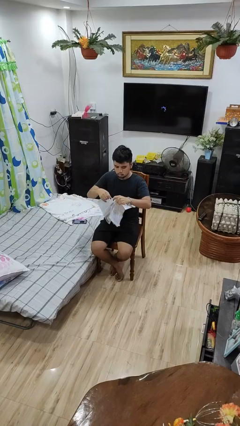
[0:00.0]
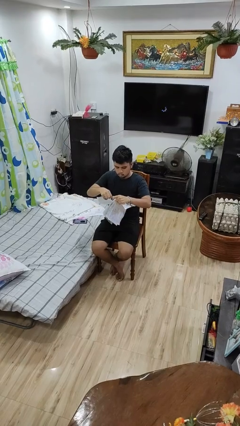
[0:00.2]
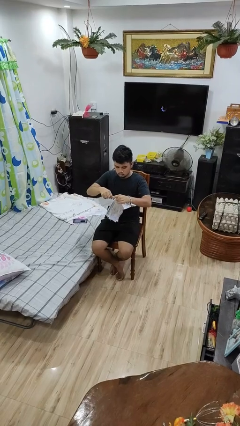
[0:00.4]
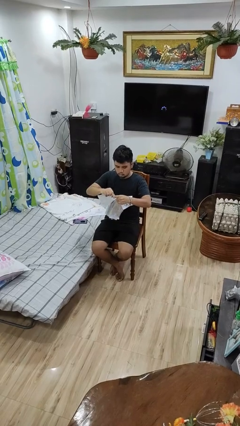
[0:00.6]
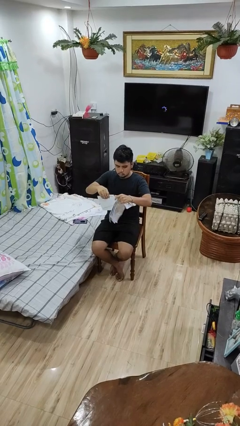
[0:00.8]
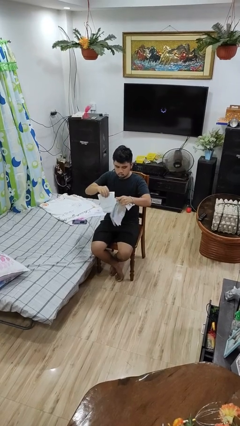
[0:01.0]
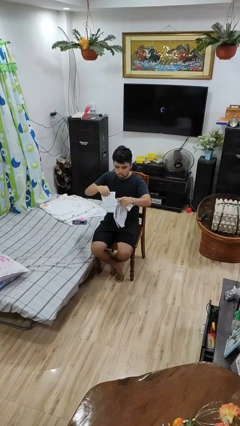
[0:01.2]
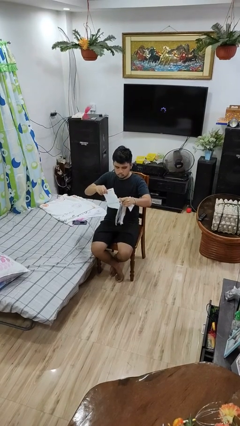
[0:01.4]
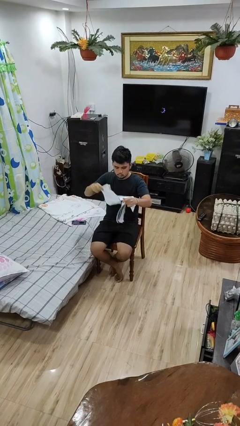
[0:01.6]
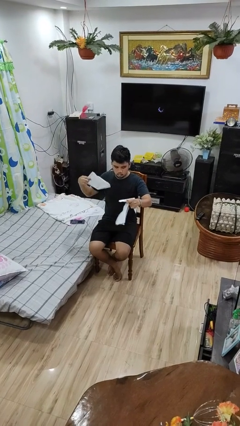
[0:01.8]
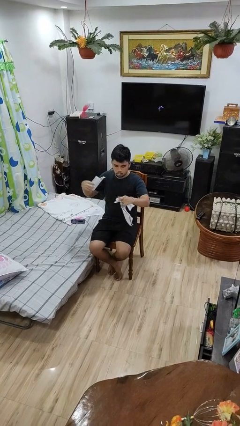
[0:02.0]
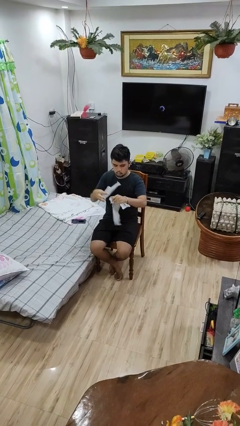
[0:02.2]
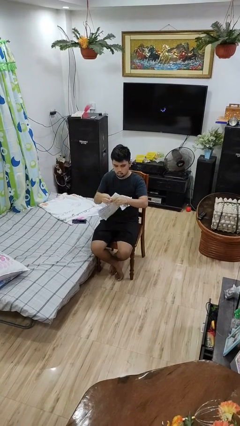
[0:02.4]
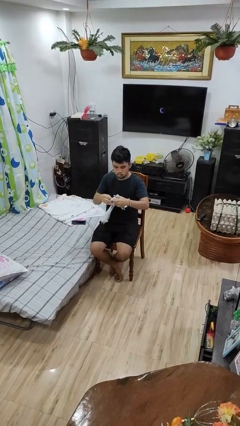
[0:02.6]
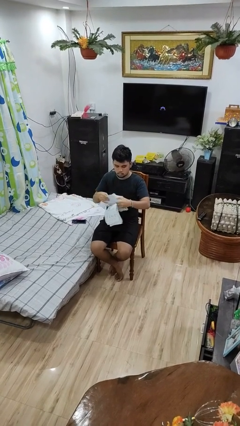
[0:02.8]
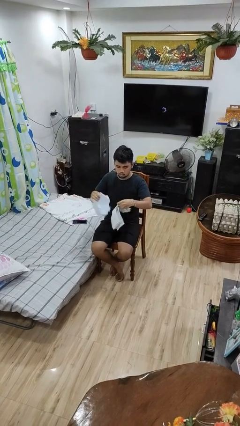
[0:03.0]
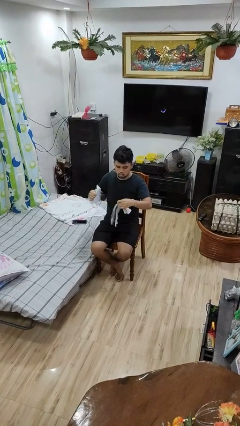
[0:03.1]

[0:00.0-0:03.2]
person tears paper

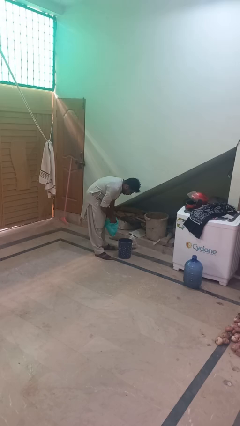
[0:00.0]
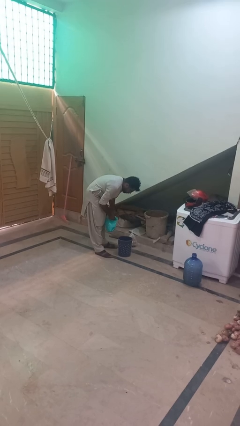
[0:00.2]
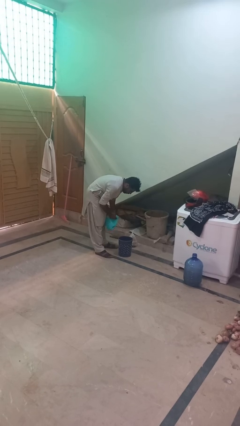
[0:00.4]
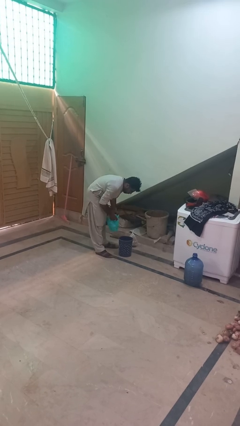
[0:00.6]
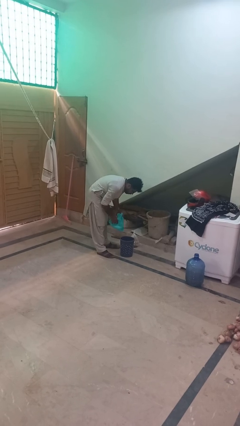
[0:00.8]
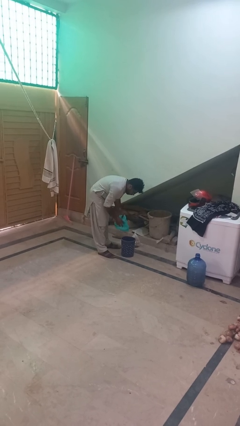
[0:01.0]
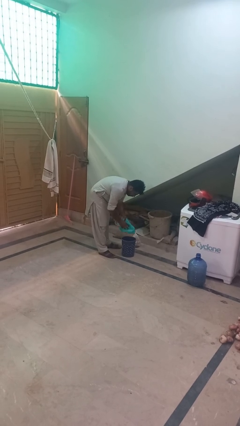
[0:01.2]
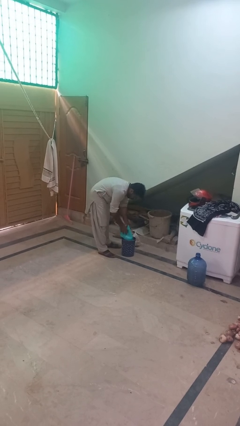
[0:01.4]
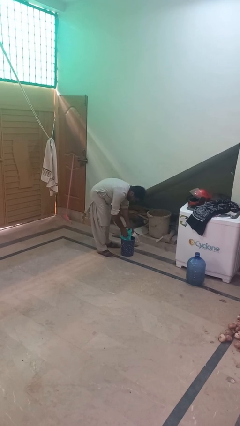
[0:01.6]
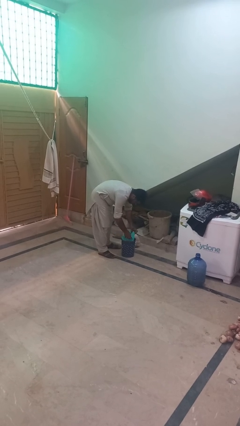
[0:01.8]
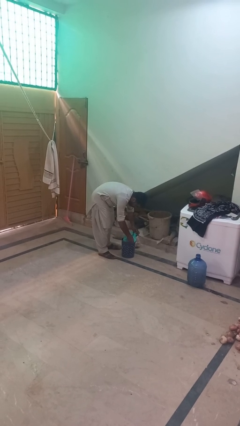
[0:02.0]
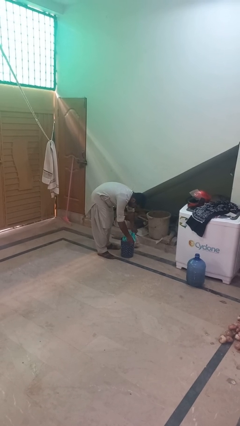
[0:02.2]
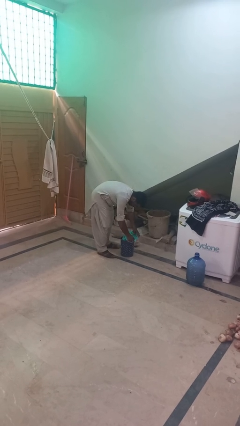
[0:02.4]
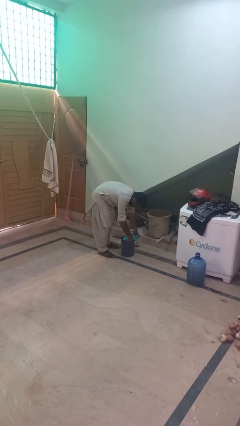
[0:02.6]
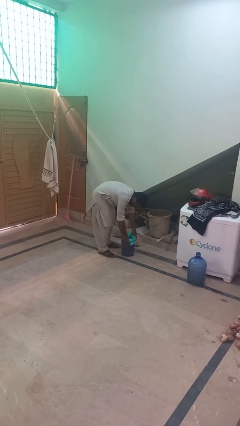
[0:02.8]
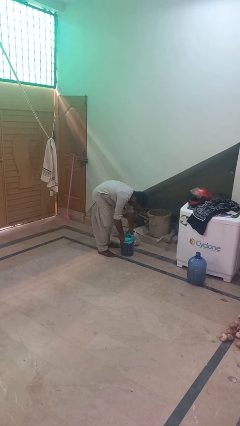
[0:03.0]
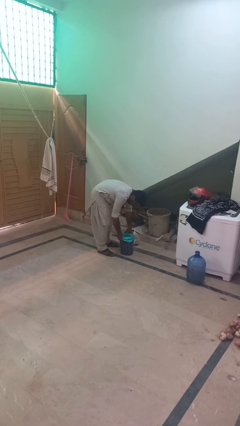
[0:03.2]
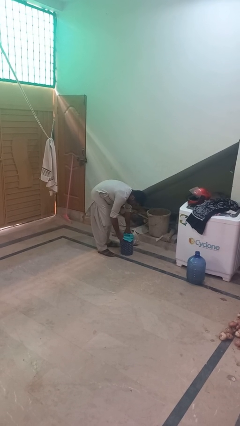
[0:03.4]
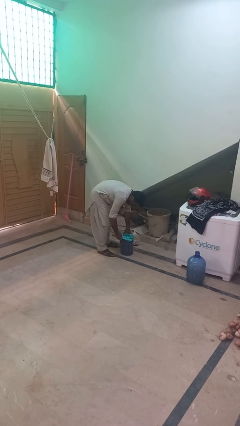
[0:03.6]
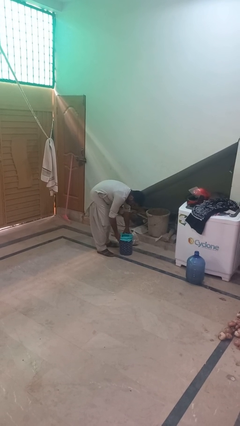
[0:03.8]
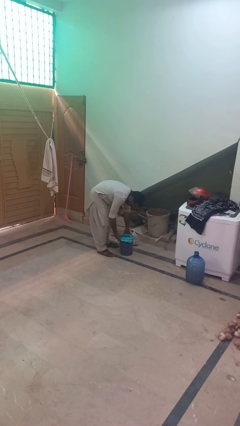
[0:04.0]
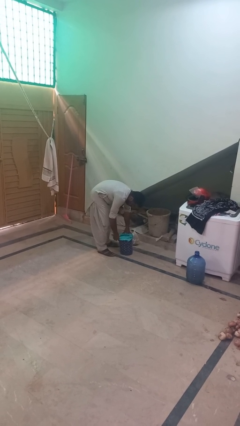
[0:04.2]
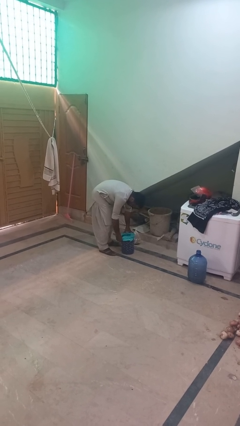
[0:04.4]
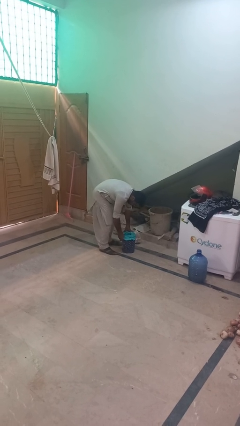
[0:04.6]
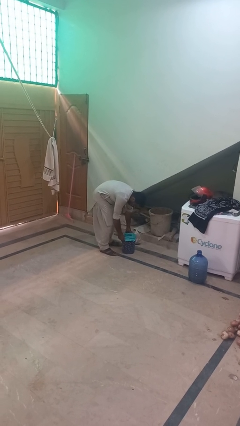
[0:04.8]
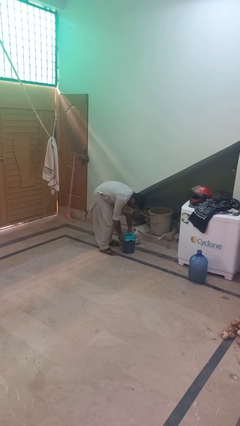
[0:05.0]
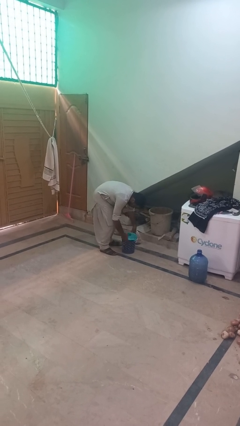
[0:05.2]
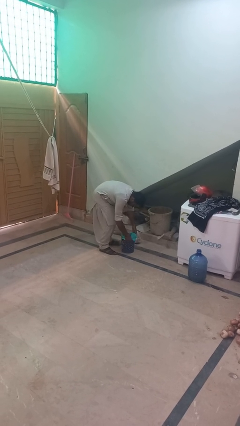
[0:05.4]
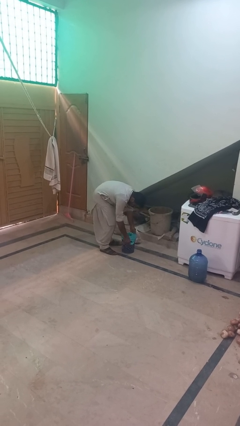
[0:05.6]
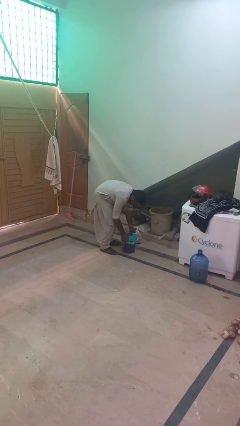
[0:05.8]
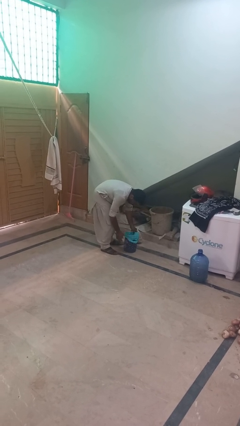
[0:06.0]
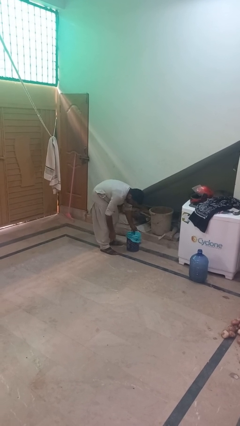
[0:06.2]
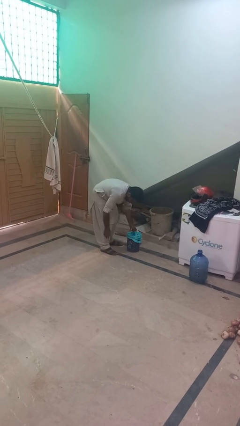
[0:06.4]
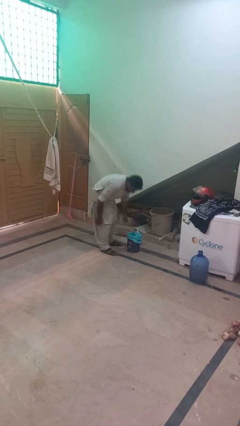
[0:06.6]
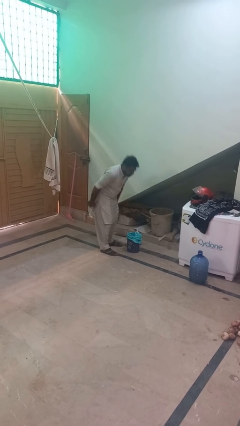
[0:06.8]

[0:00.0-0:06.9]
person inserts trashbag into trashcan

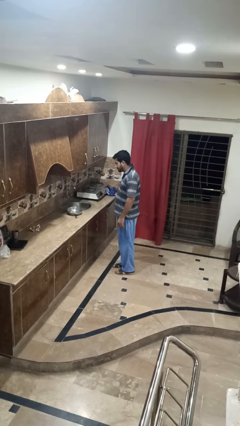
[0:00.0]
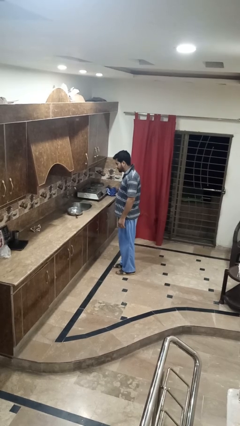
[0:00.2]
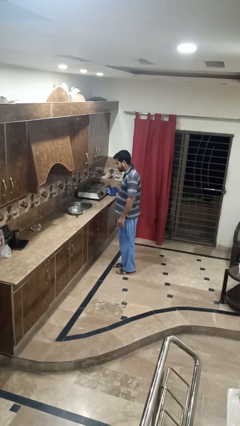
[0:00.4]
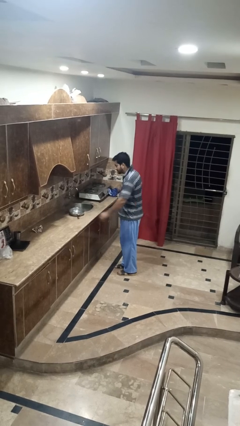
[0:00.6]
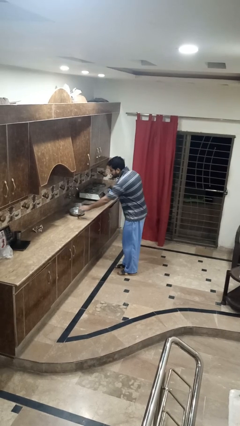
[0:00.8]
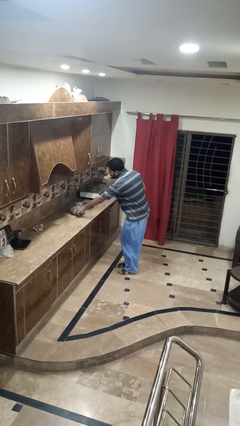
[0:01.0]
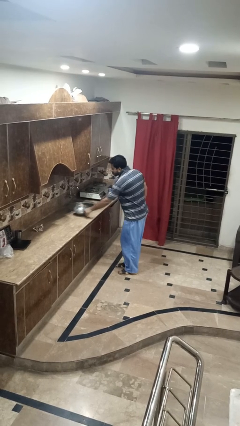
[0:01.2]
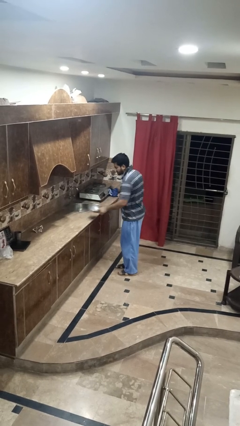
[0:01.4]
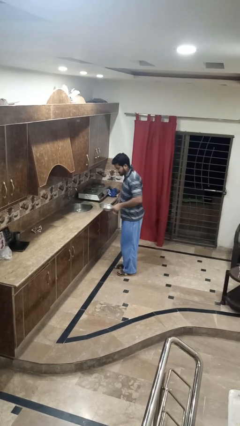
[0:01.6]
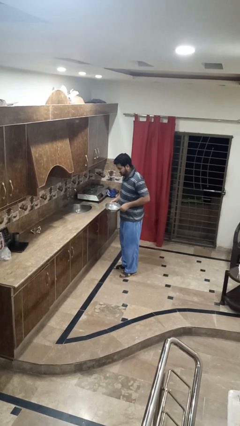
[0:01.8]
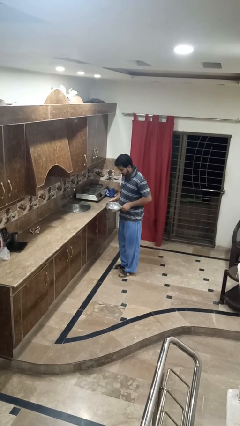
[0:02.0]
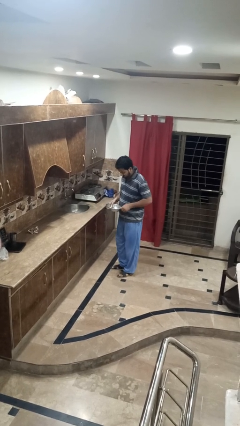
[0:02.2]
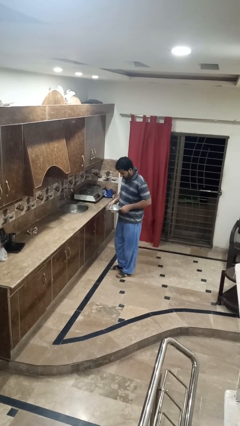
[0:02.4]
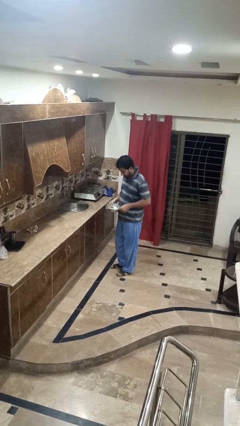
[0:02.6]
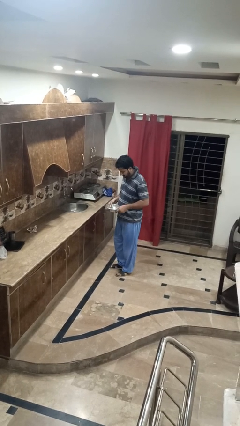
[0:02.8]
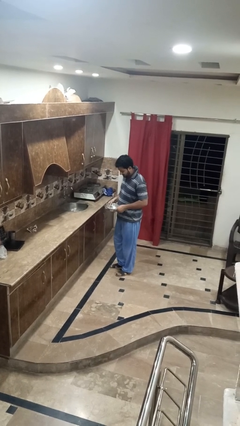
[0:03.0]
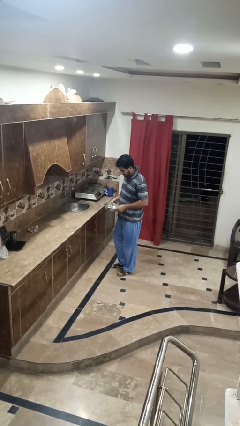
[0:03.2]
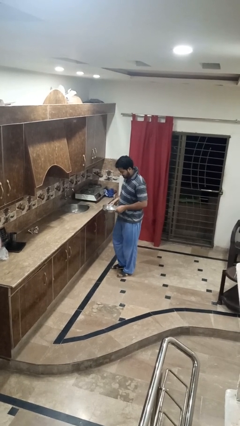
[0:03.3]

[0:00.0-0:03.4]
person picks up object from countertop

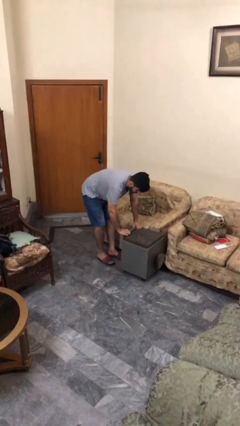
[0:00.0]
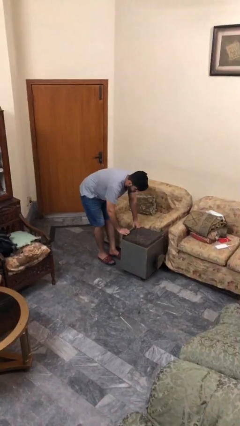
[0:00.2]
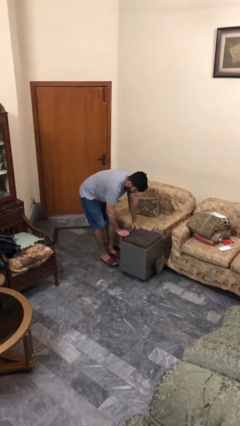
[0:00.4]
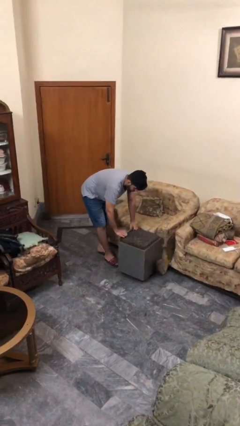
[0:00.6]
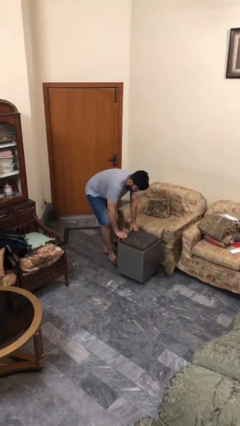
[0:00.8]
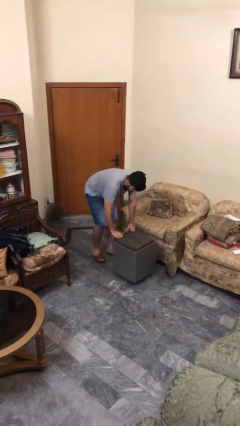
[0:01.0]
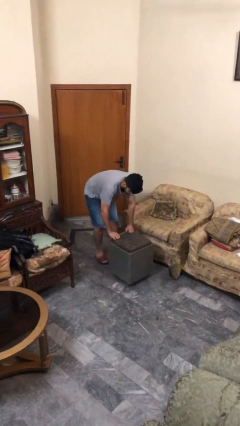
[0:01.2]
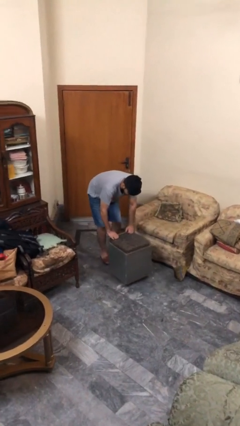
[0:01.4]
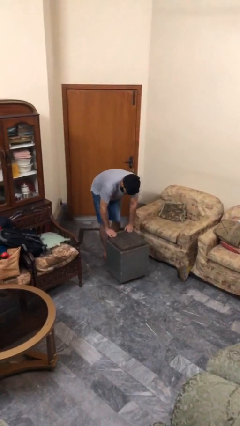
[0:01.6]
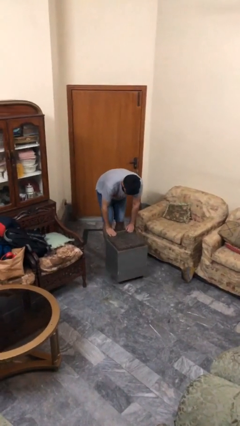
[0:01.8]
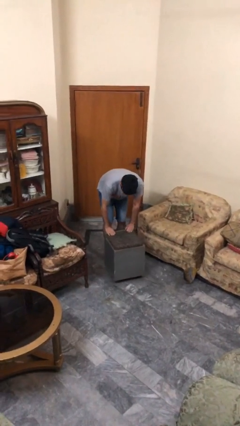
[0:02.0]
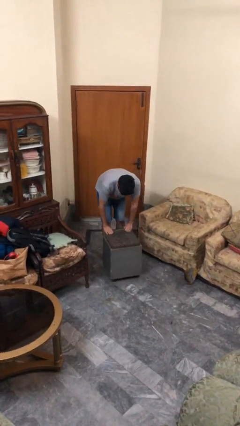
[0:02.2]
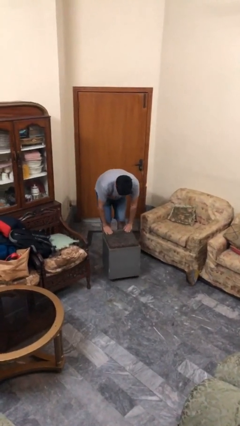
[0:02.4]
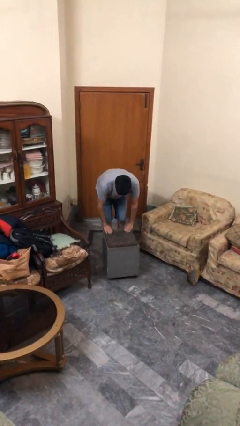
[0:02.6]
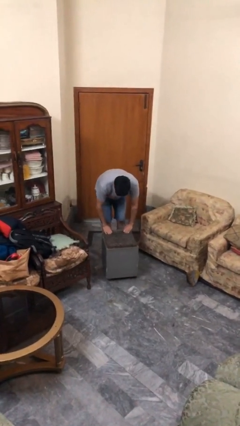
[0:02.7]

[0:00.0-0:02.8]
person pulls wheeled cart

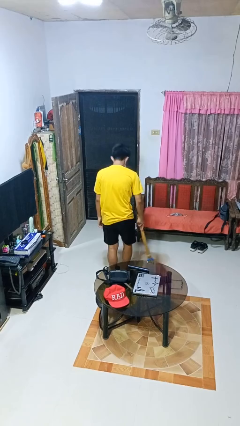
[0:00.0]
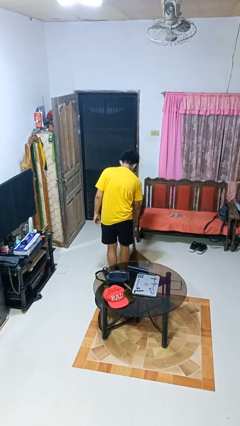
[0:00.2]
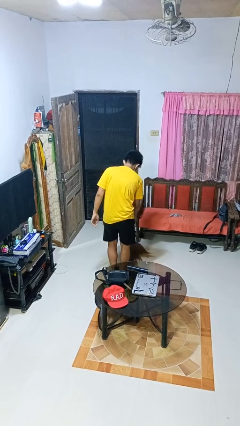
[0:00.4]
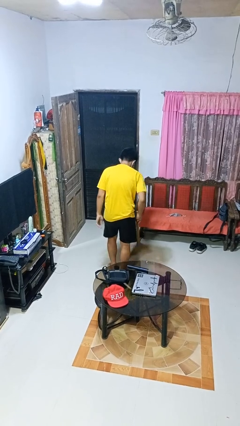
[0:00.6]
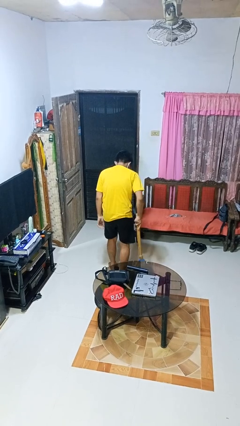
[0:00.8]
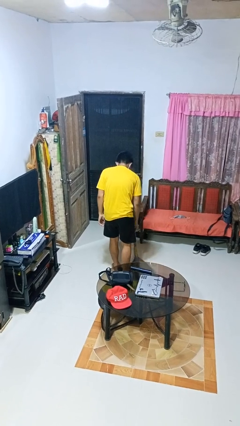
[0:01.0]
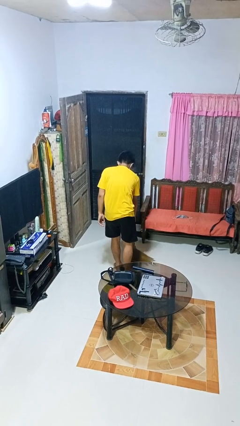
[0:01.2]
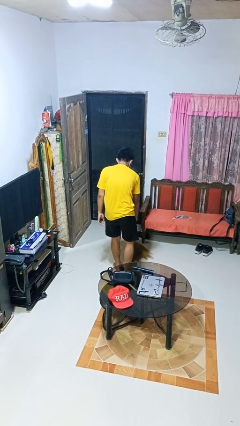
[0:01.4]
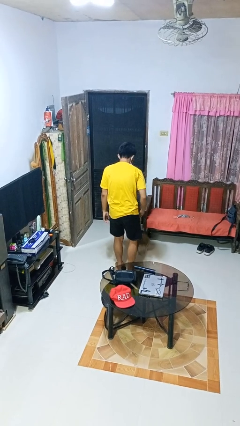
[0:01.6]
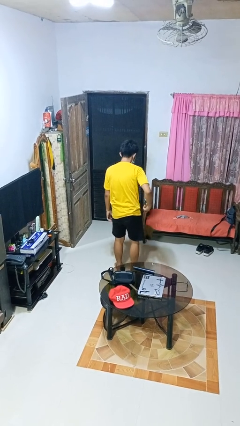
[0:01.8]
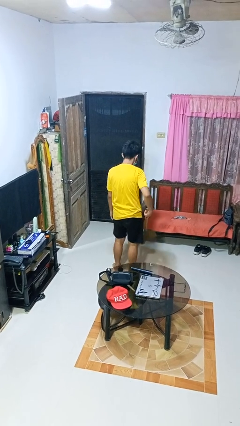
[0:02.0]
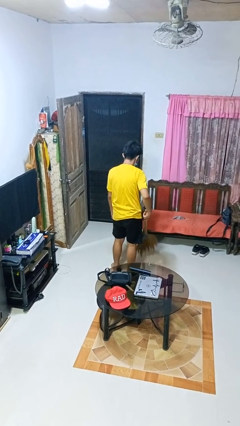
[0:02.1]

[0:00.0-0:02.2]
person sweeps floor
